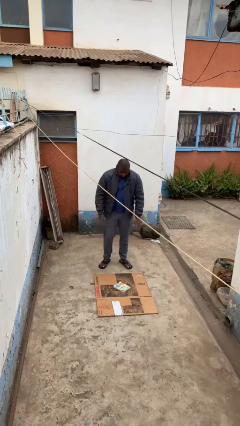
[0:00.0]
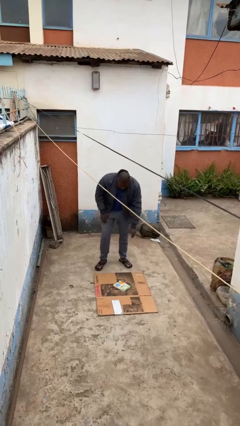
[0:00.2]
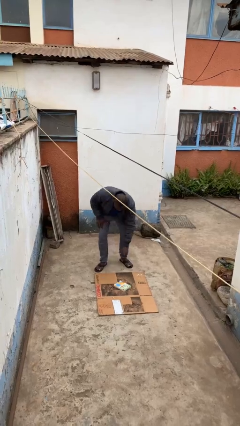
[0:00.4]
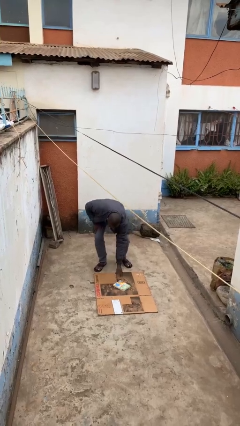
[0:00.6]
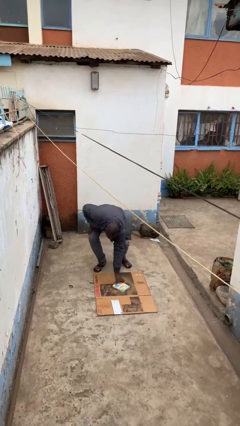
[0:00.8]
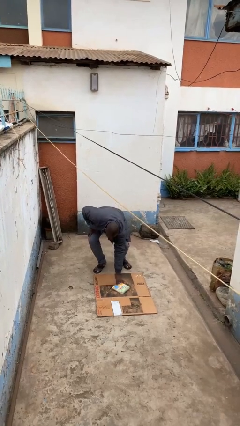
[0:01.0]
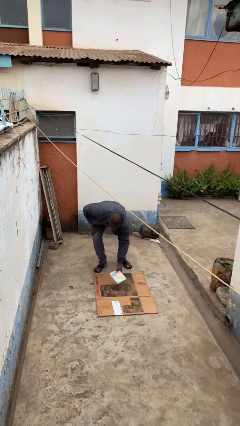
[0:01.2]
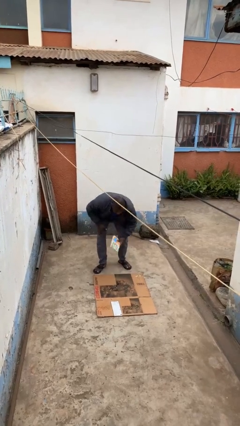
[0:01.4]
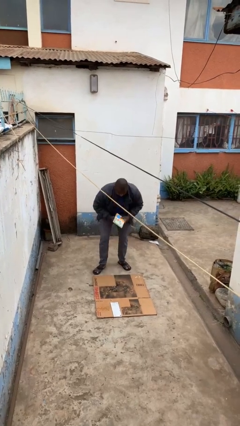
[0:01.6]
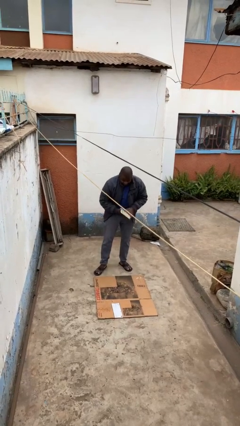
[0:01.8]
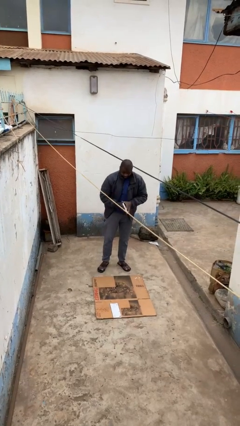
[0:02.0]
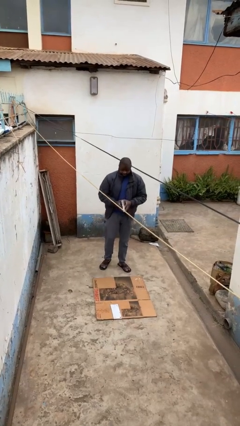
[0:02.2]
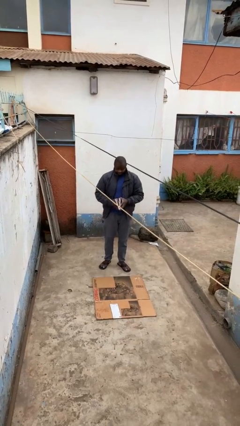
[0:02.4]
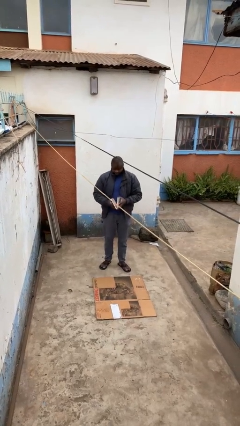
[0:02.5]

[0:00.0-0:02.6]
person picks up object from floor

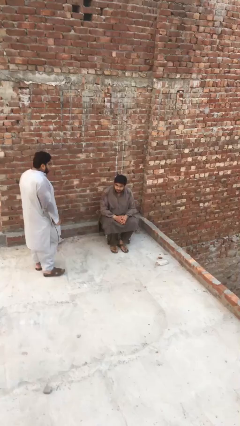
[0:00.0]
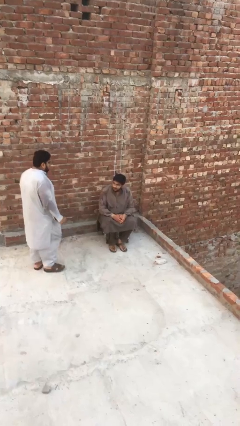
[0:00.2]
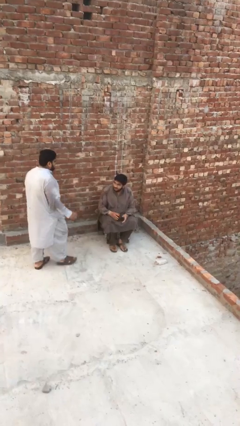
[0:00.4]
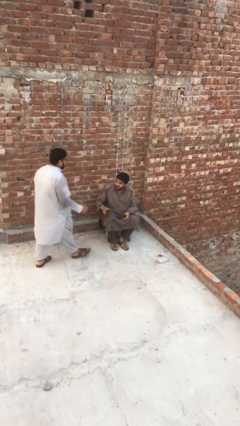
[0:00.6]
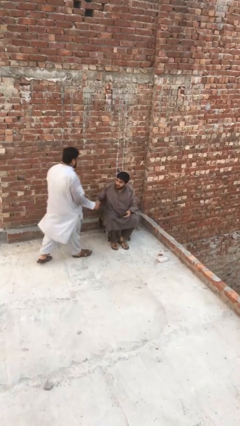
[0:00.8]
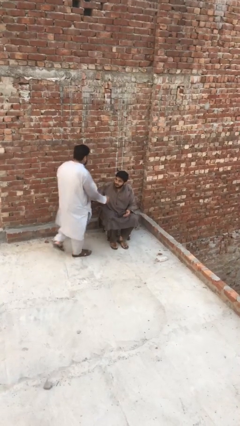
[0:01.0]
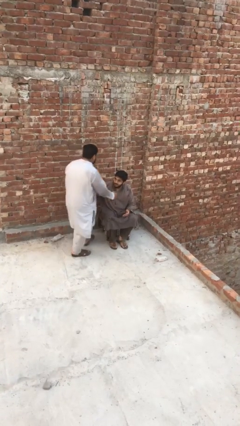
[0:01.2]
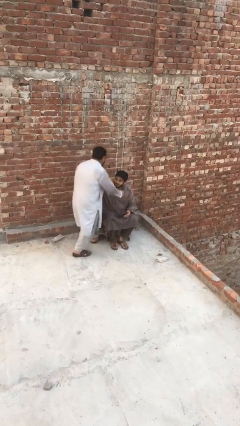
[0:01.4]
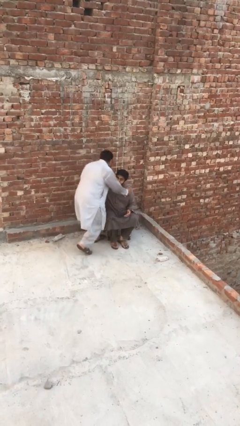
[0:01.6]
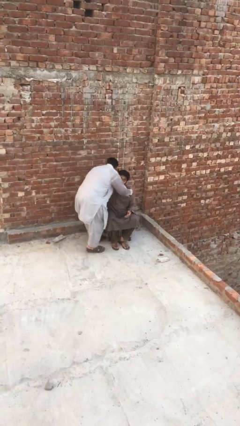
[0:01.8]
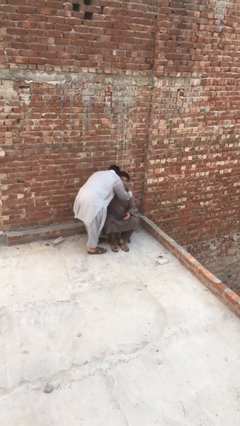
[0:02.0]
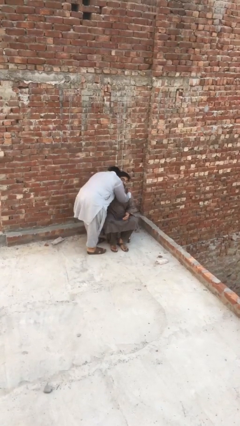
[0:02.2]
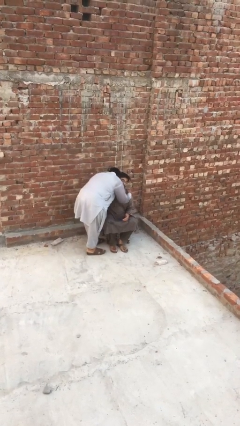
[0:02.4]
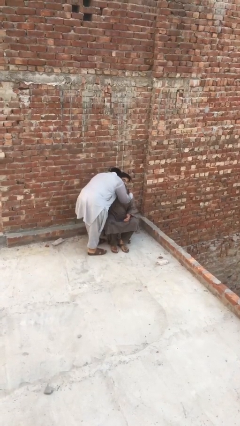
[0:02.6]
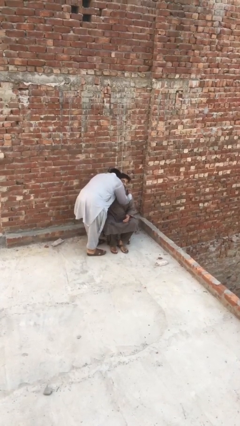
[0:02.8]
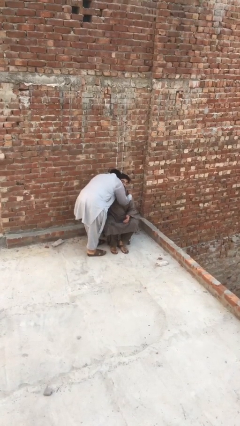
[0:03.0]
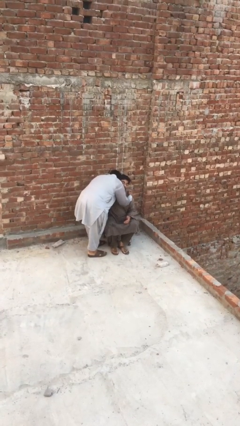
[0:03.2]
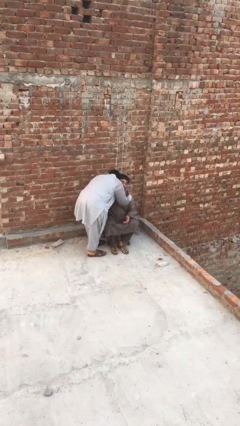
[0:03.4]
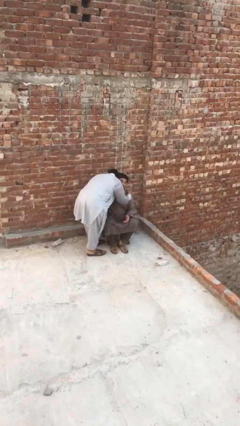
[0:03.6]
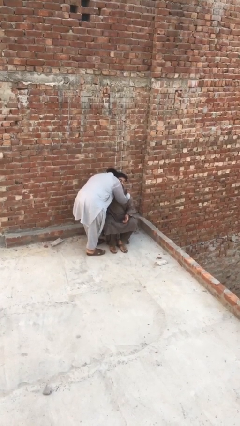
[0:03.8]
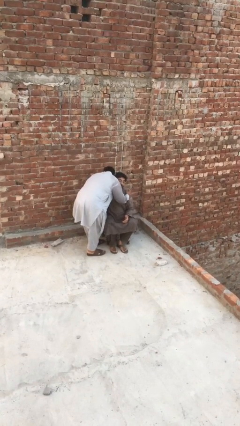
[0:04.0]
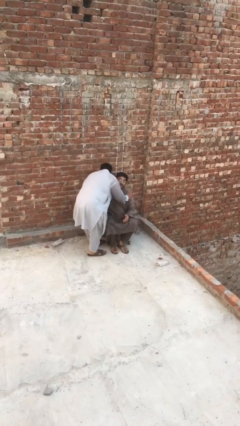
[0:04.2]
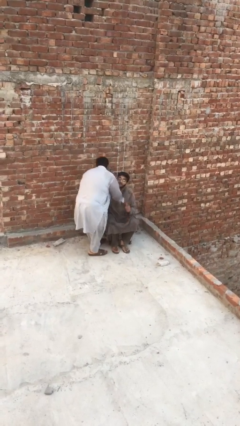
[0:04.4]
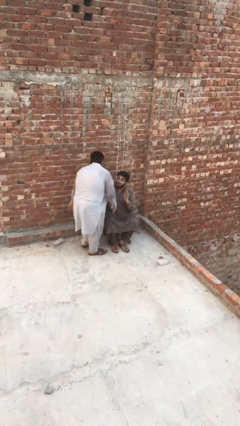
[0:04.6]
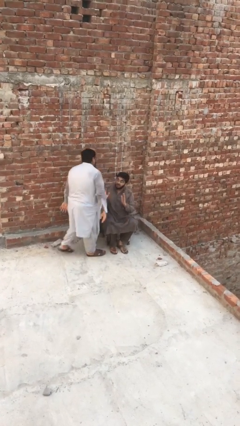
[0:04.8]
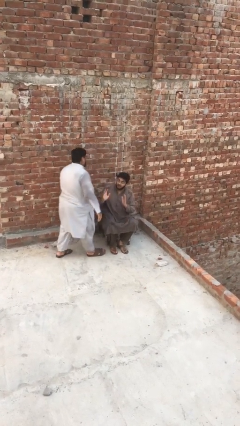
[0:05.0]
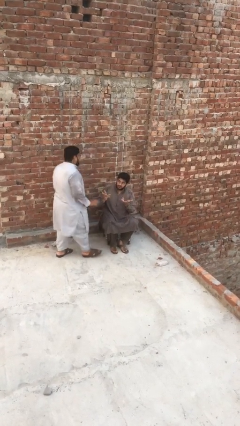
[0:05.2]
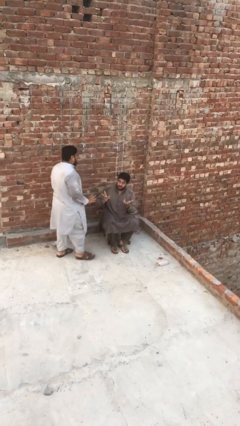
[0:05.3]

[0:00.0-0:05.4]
person embraces person

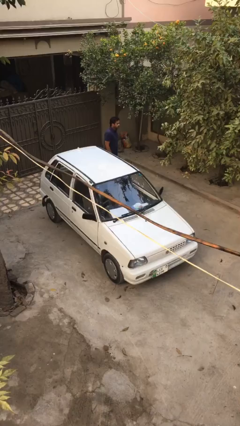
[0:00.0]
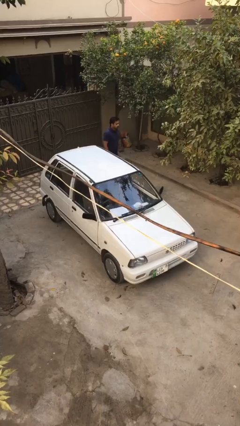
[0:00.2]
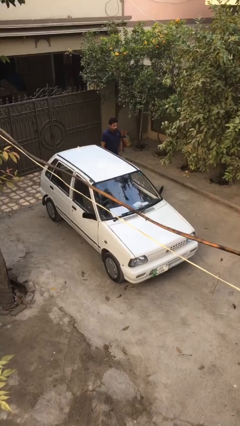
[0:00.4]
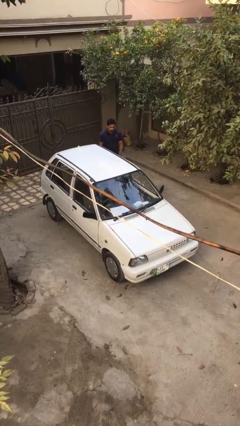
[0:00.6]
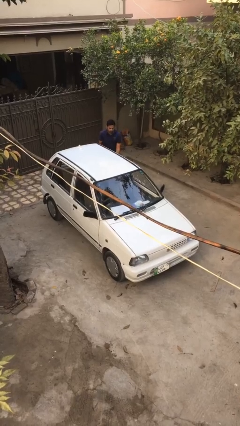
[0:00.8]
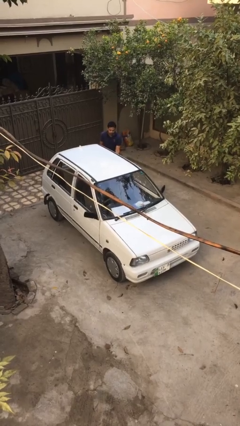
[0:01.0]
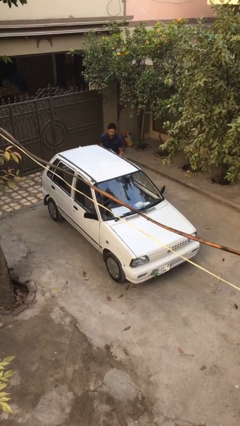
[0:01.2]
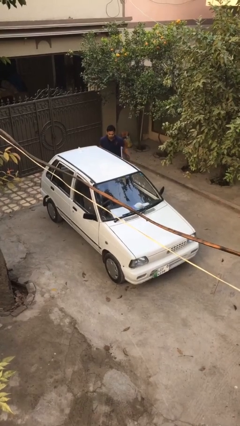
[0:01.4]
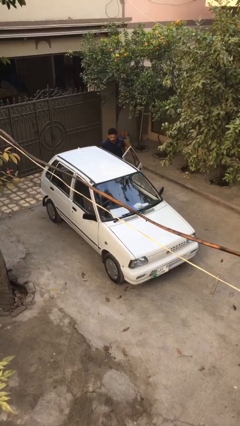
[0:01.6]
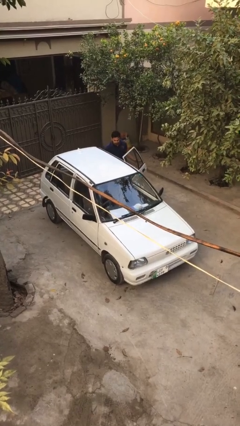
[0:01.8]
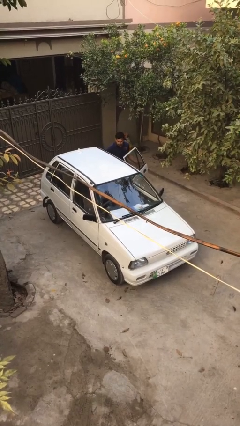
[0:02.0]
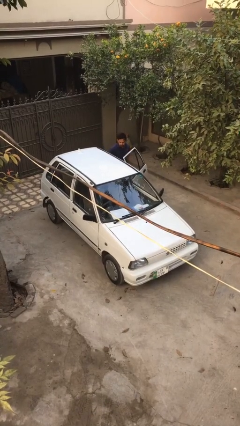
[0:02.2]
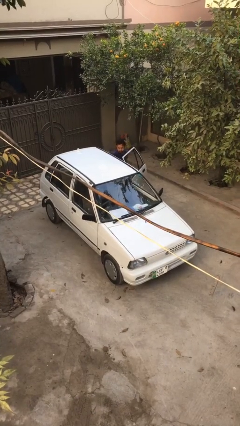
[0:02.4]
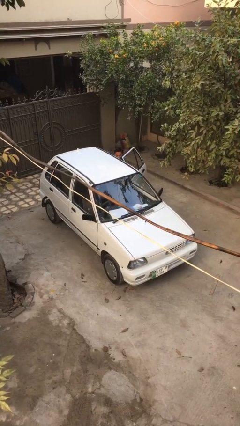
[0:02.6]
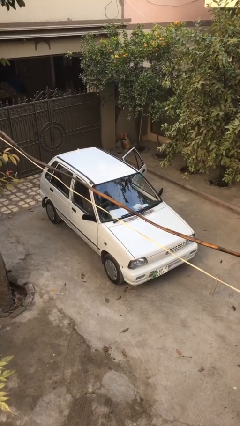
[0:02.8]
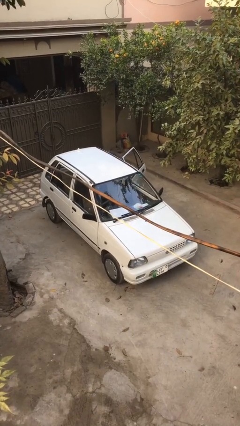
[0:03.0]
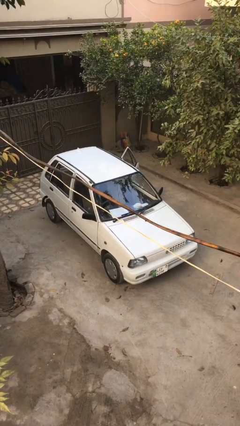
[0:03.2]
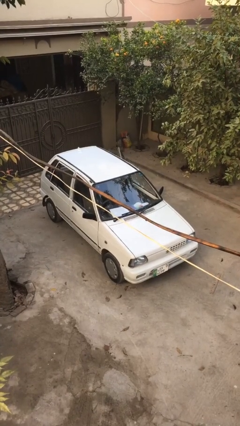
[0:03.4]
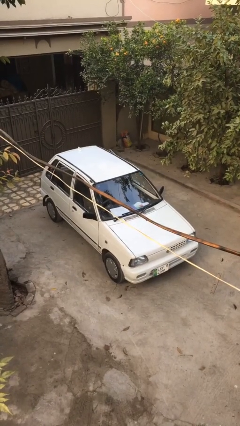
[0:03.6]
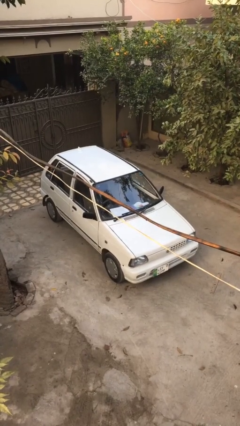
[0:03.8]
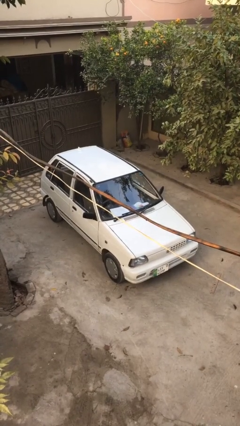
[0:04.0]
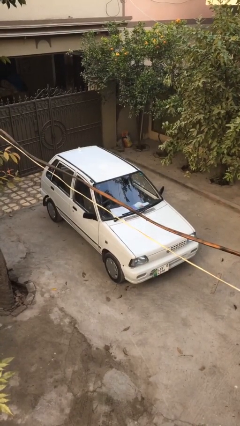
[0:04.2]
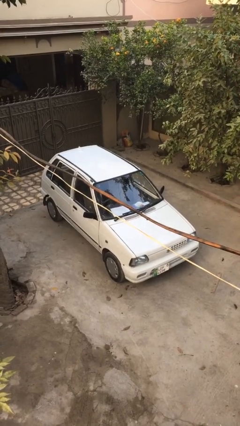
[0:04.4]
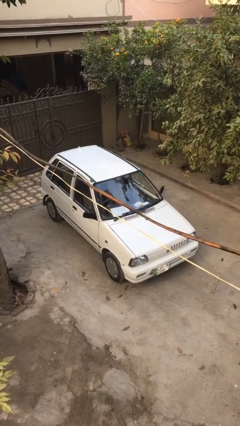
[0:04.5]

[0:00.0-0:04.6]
car picks up person

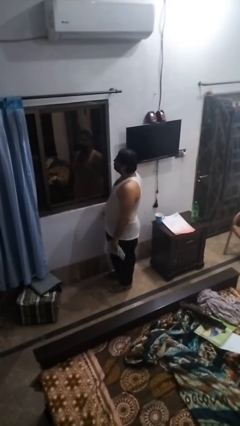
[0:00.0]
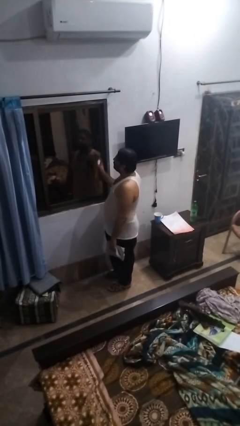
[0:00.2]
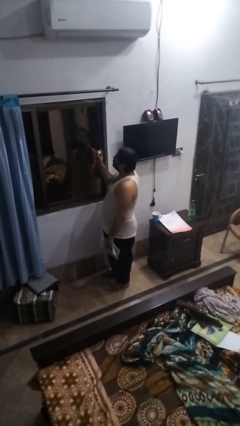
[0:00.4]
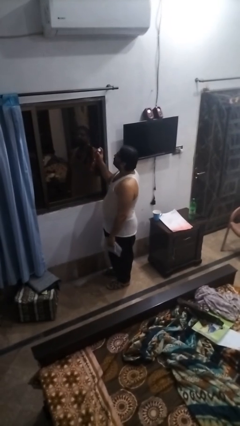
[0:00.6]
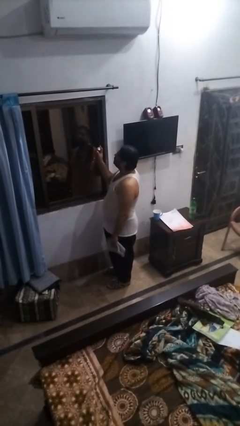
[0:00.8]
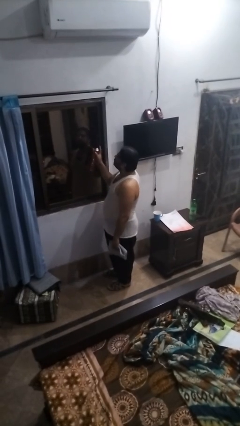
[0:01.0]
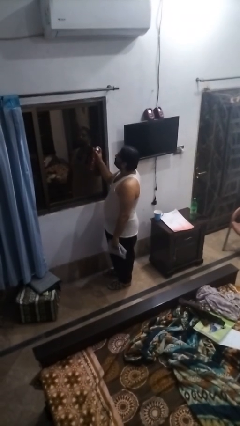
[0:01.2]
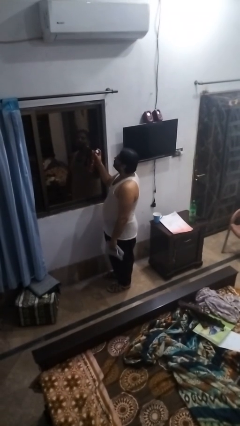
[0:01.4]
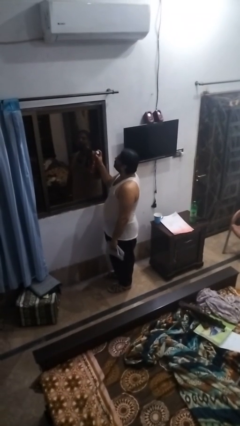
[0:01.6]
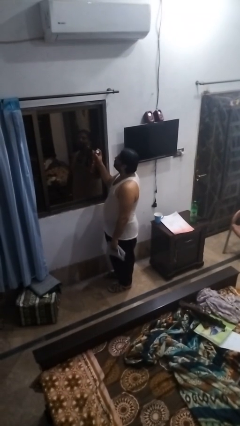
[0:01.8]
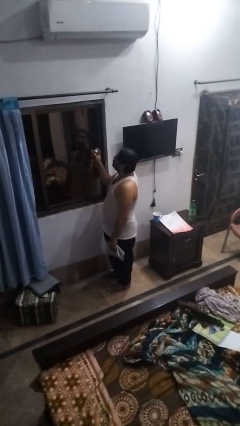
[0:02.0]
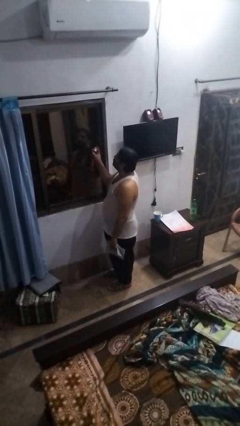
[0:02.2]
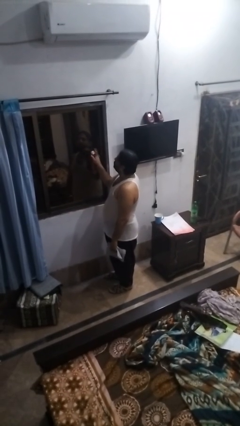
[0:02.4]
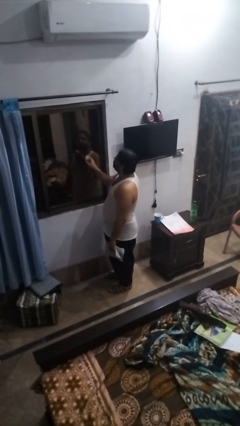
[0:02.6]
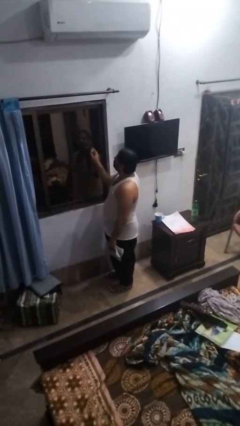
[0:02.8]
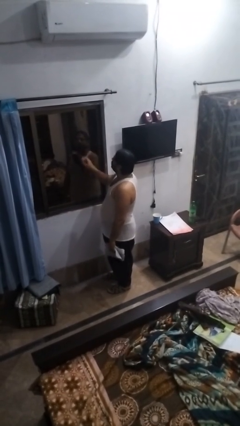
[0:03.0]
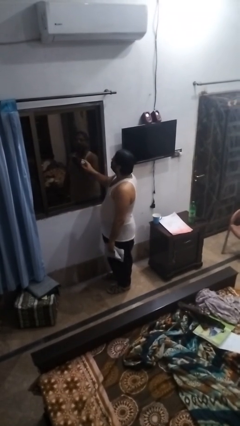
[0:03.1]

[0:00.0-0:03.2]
person sprays from bottle
